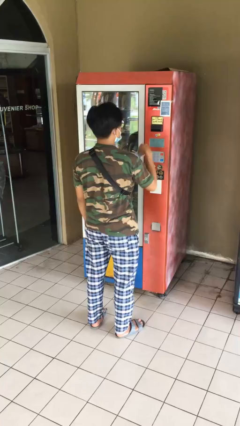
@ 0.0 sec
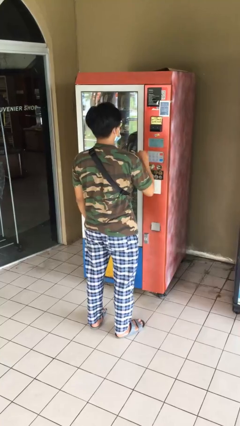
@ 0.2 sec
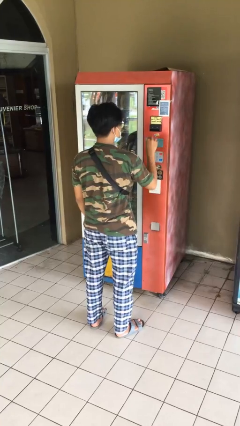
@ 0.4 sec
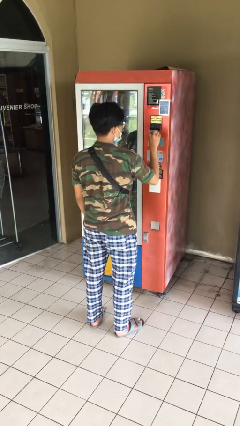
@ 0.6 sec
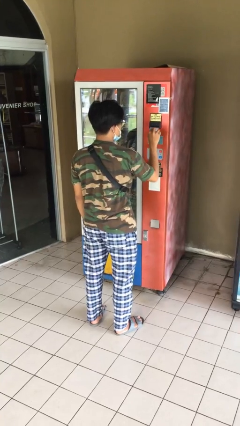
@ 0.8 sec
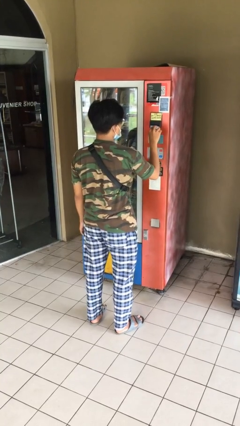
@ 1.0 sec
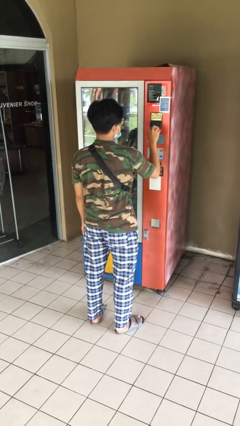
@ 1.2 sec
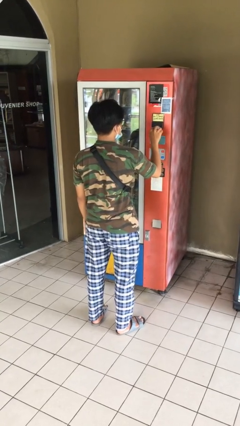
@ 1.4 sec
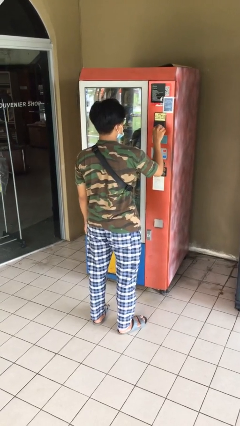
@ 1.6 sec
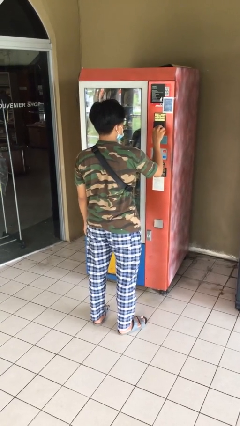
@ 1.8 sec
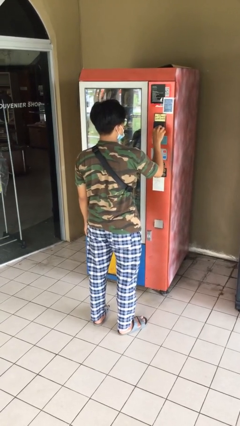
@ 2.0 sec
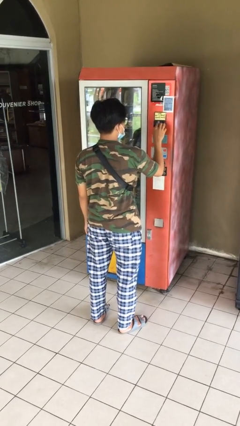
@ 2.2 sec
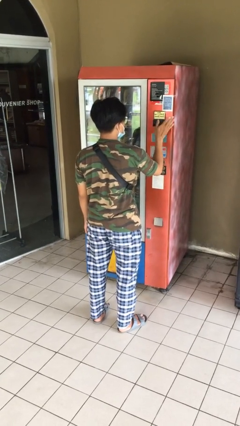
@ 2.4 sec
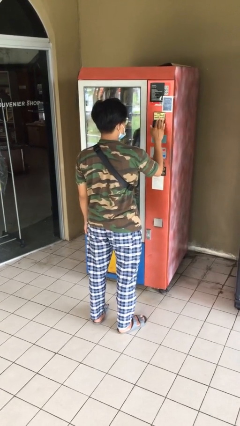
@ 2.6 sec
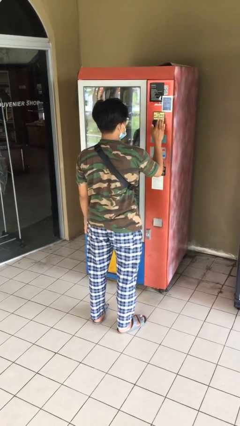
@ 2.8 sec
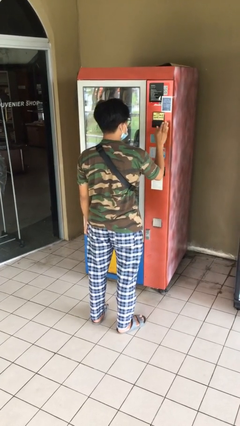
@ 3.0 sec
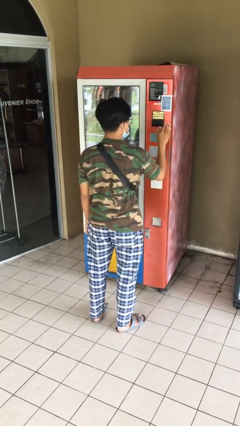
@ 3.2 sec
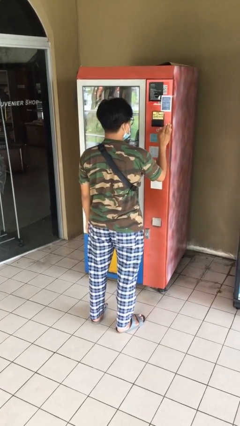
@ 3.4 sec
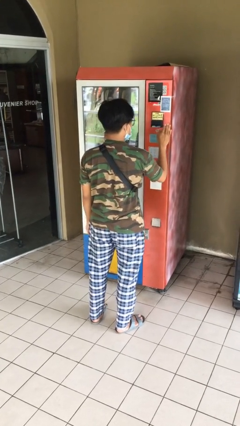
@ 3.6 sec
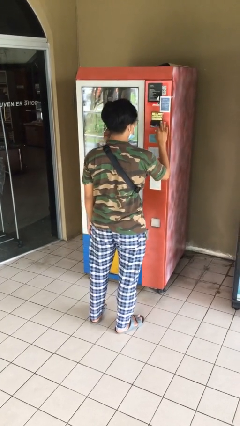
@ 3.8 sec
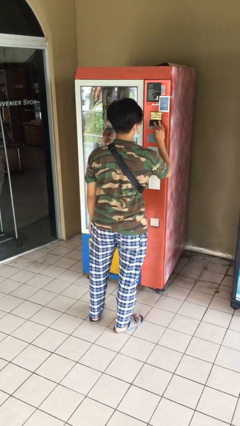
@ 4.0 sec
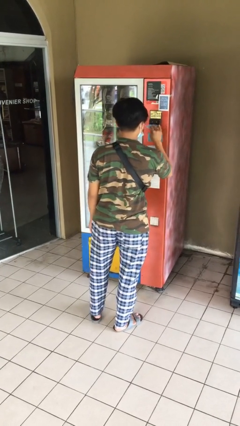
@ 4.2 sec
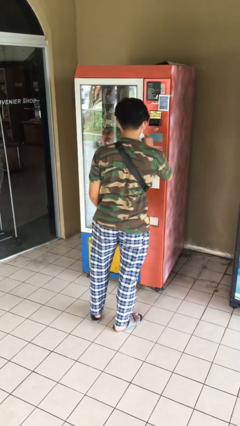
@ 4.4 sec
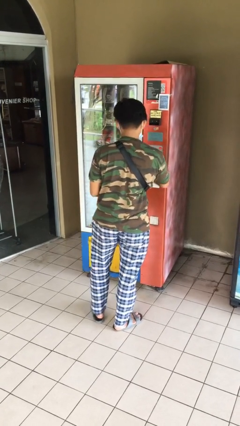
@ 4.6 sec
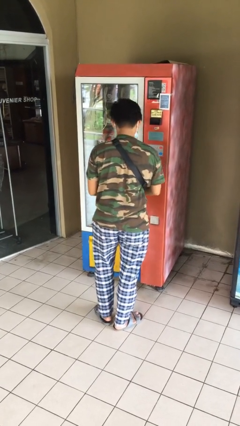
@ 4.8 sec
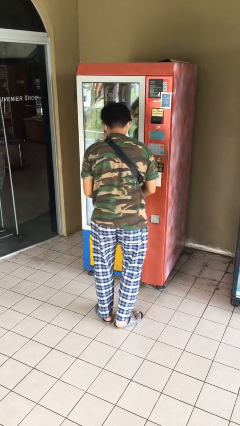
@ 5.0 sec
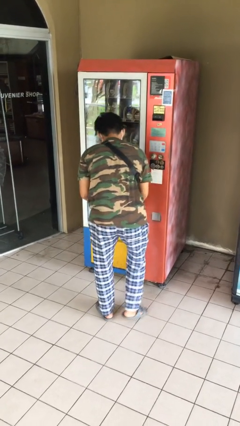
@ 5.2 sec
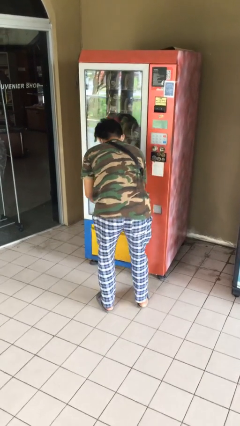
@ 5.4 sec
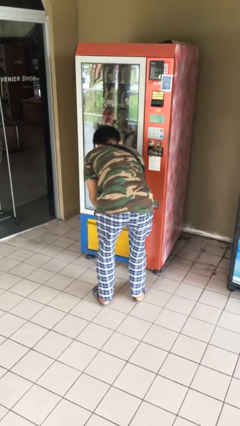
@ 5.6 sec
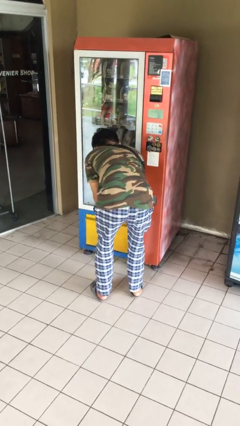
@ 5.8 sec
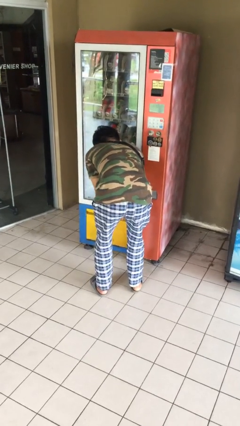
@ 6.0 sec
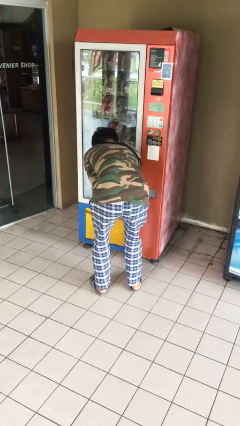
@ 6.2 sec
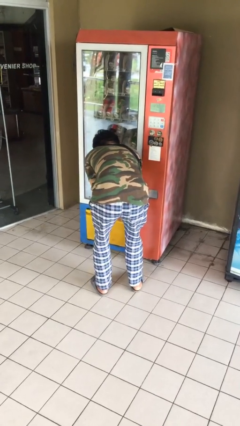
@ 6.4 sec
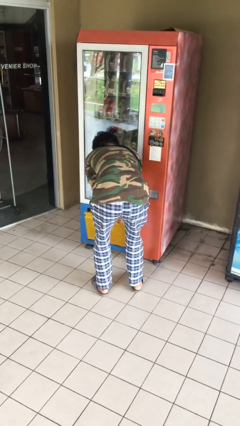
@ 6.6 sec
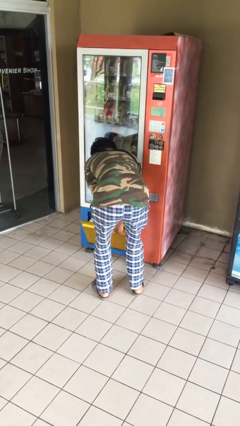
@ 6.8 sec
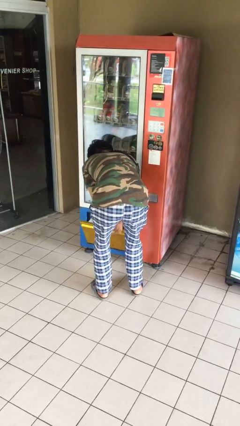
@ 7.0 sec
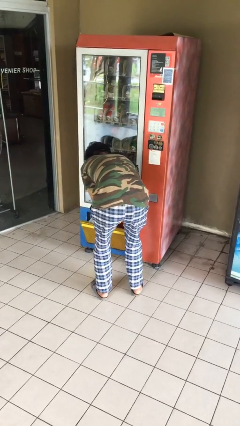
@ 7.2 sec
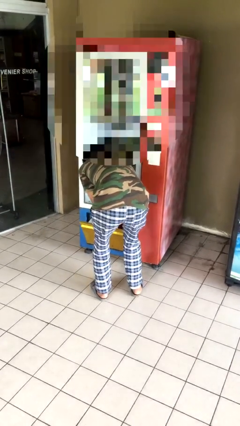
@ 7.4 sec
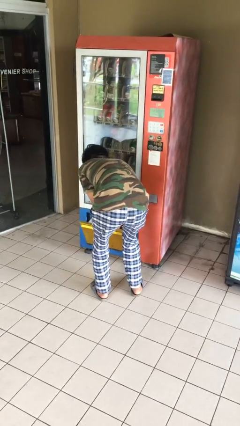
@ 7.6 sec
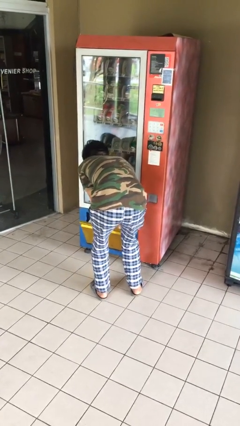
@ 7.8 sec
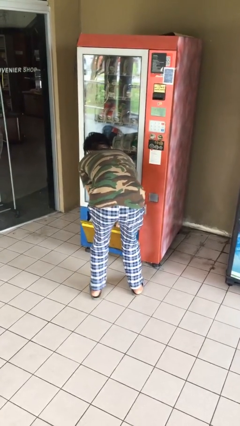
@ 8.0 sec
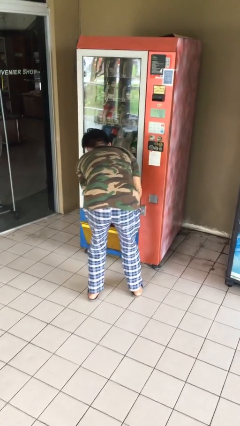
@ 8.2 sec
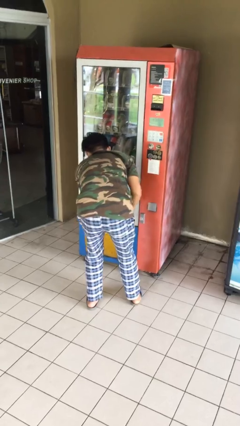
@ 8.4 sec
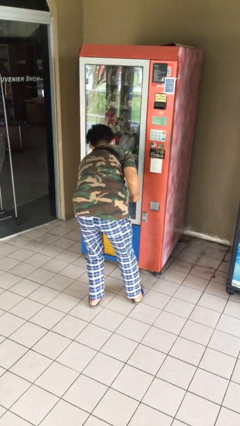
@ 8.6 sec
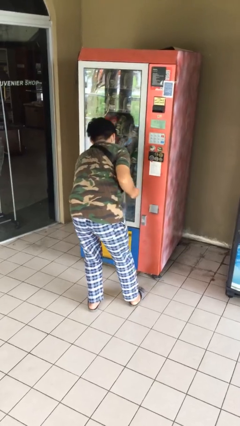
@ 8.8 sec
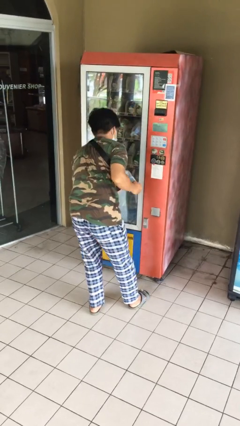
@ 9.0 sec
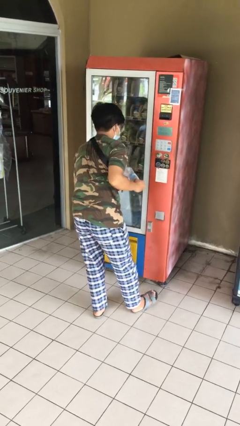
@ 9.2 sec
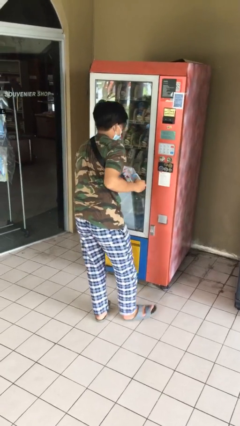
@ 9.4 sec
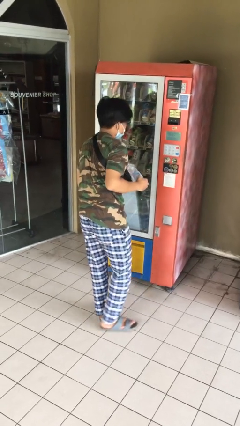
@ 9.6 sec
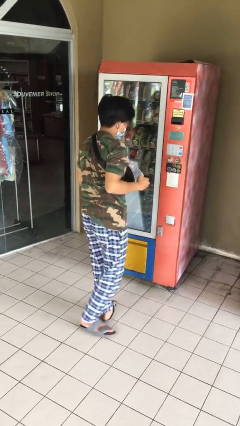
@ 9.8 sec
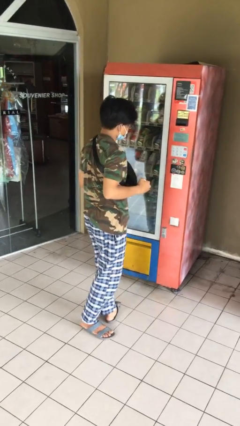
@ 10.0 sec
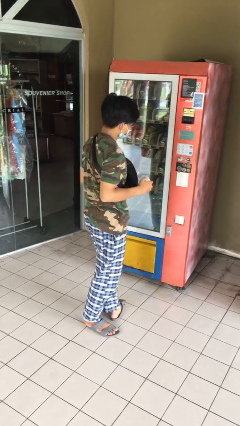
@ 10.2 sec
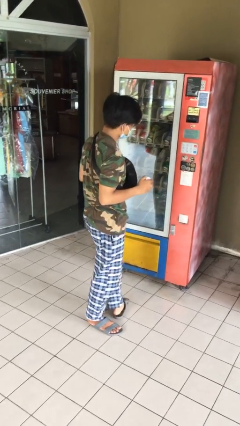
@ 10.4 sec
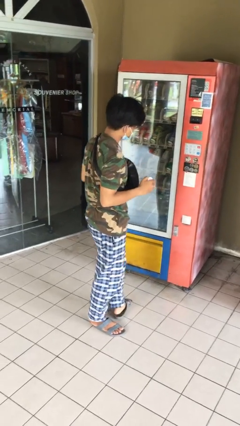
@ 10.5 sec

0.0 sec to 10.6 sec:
person purchases from machine

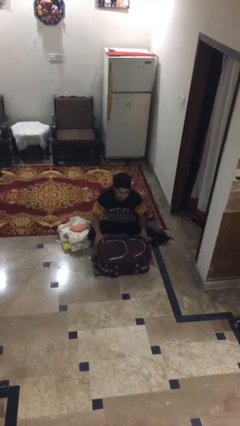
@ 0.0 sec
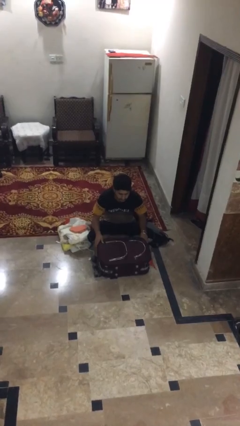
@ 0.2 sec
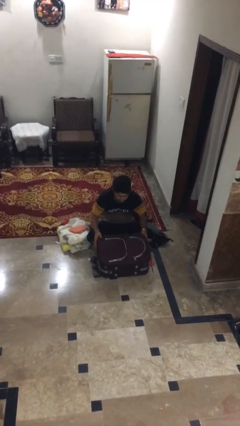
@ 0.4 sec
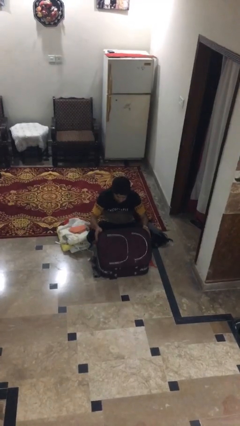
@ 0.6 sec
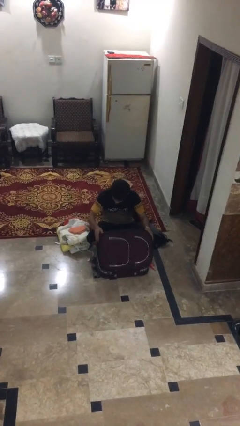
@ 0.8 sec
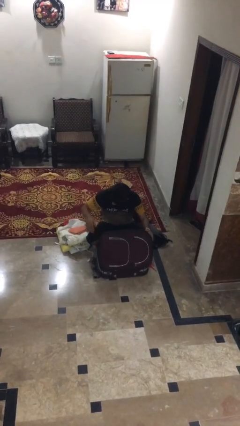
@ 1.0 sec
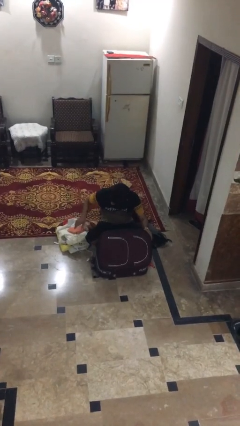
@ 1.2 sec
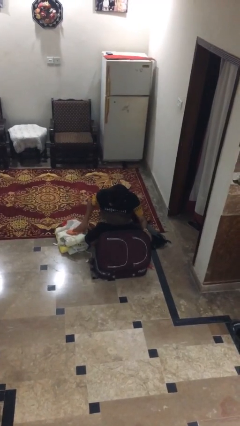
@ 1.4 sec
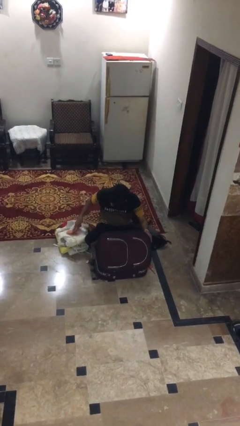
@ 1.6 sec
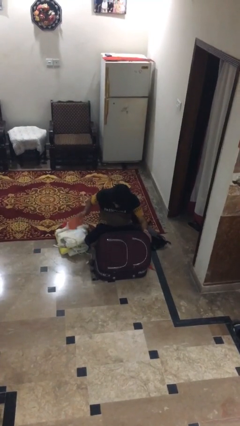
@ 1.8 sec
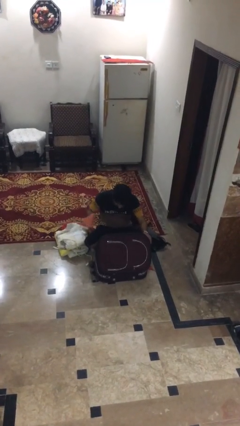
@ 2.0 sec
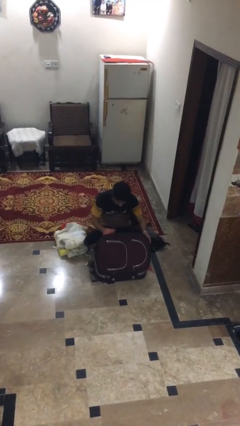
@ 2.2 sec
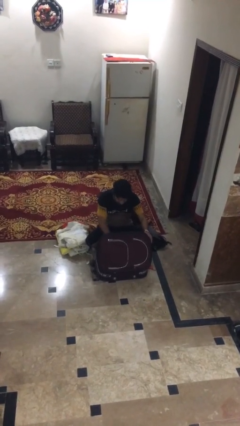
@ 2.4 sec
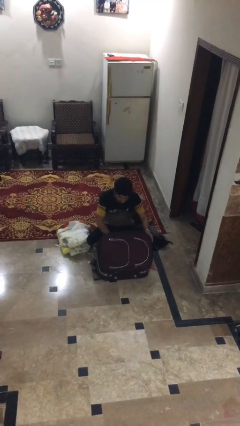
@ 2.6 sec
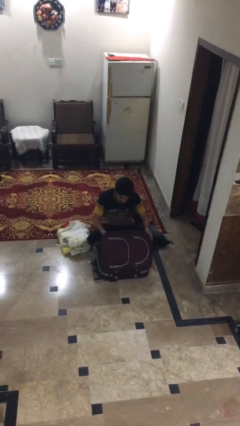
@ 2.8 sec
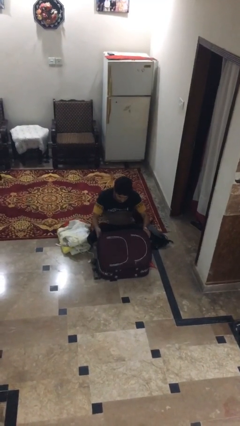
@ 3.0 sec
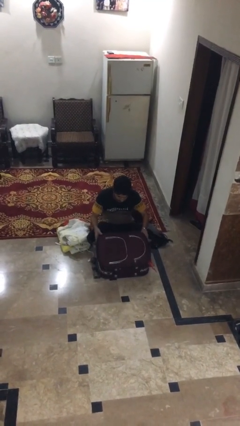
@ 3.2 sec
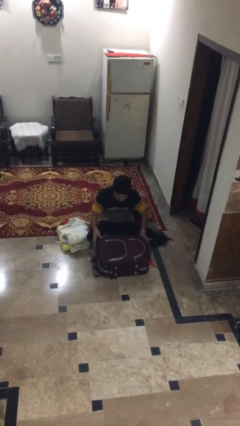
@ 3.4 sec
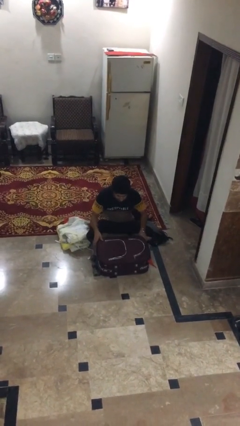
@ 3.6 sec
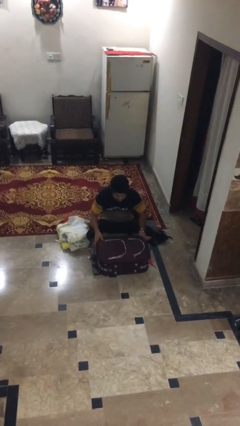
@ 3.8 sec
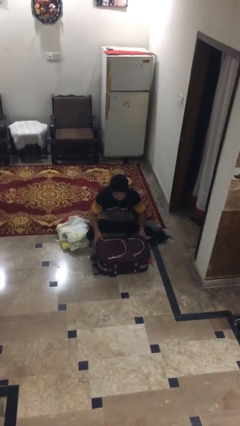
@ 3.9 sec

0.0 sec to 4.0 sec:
person loads clothes into suitcase

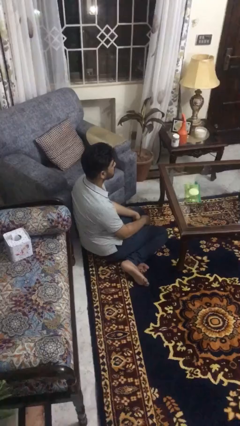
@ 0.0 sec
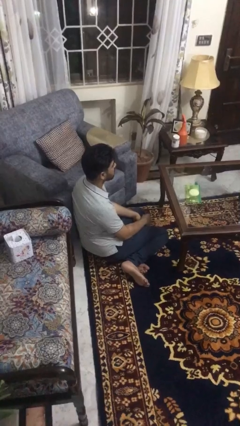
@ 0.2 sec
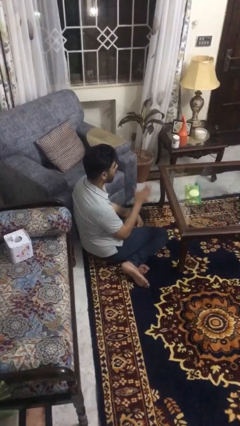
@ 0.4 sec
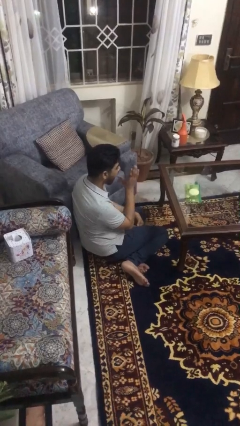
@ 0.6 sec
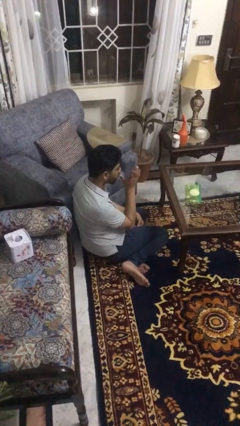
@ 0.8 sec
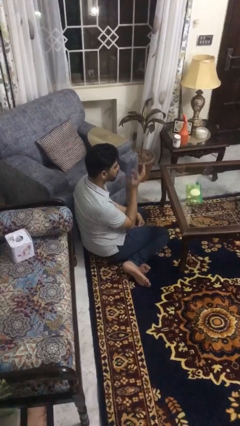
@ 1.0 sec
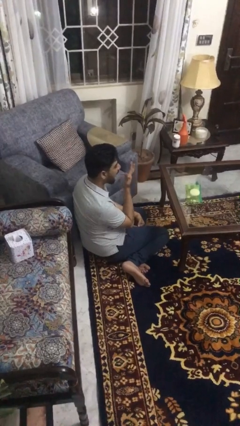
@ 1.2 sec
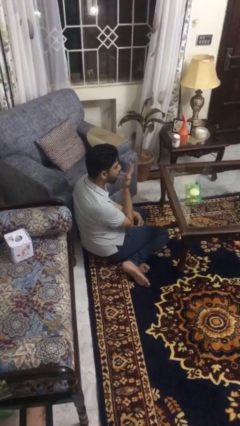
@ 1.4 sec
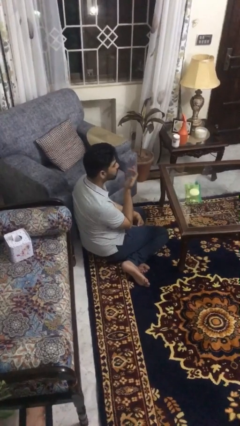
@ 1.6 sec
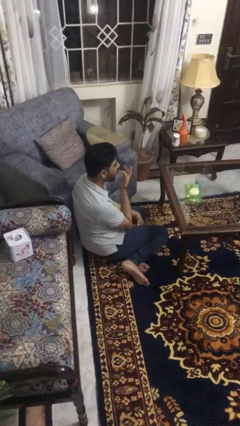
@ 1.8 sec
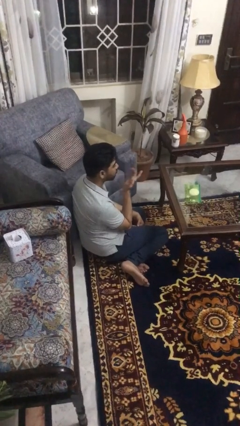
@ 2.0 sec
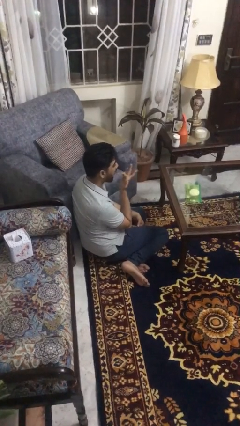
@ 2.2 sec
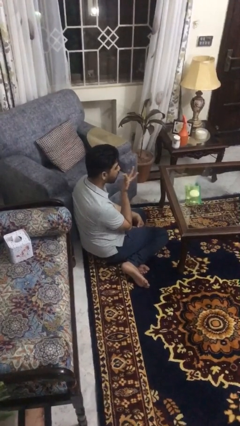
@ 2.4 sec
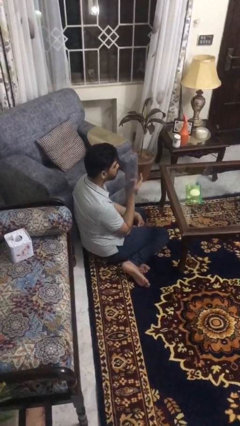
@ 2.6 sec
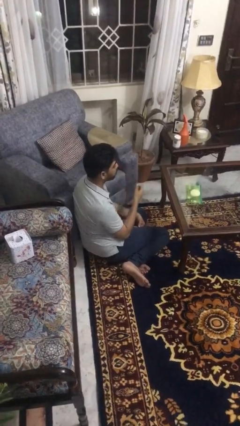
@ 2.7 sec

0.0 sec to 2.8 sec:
person licks fingers

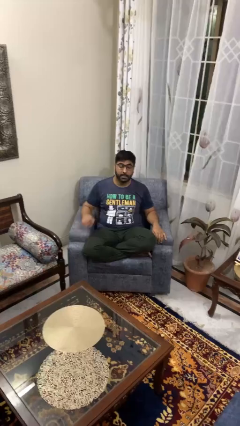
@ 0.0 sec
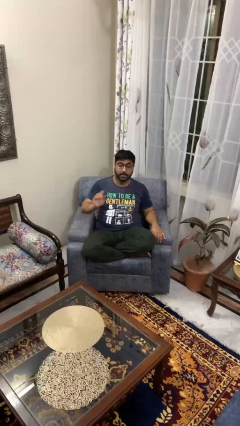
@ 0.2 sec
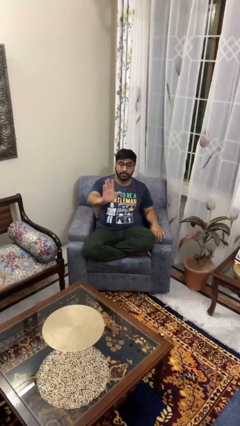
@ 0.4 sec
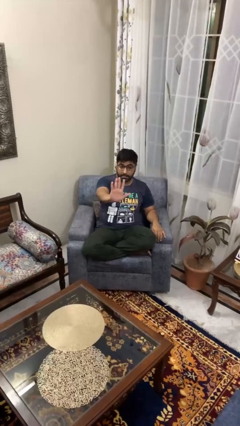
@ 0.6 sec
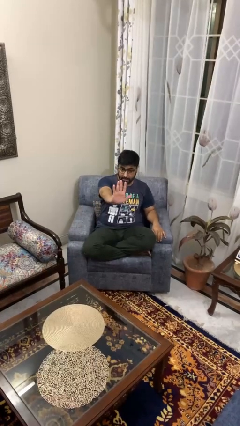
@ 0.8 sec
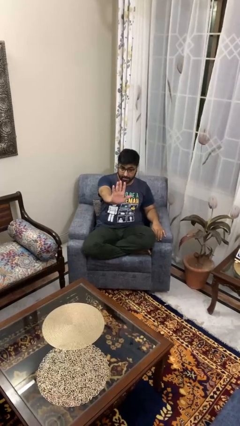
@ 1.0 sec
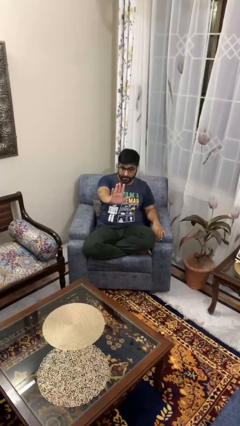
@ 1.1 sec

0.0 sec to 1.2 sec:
person gestures stop
